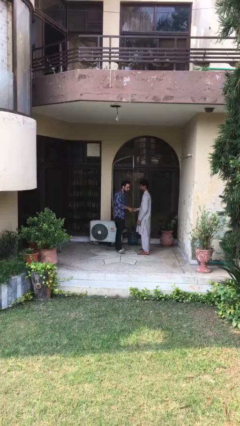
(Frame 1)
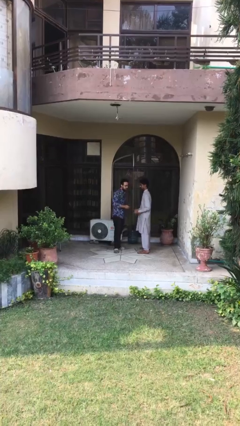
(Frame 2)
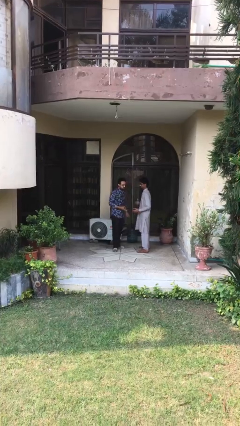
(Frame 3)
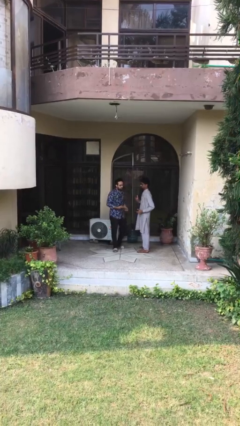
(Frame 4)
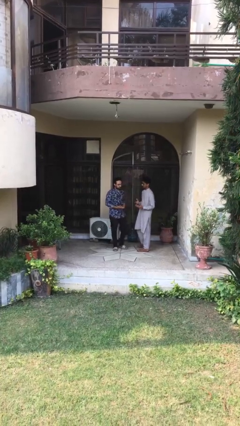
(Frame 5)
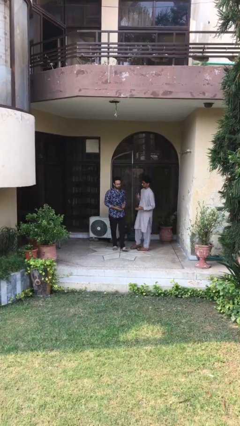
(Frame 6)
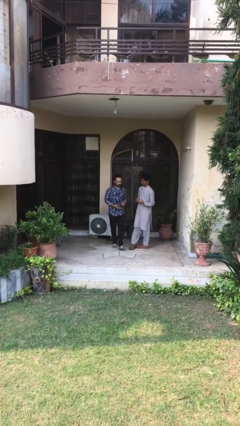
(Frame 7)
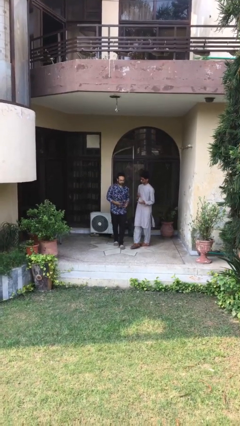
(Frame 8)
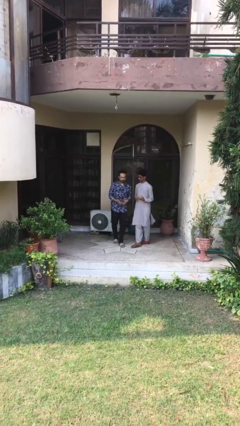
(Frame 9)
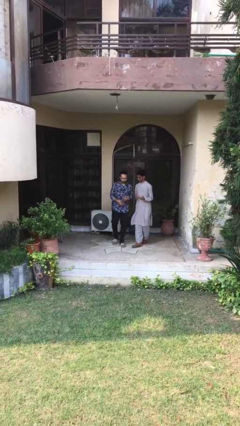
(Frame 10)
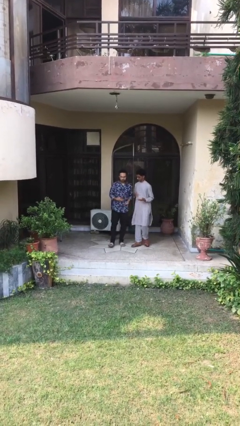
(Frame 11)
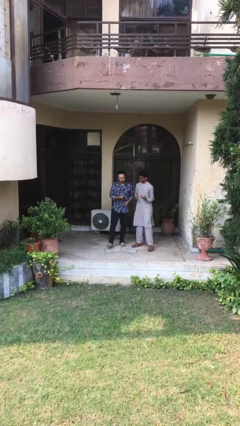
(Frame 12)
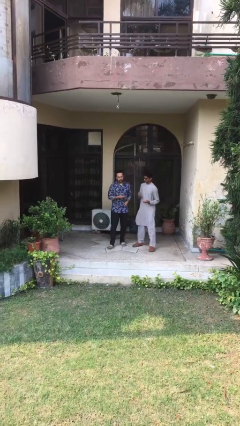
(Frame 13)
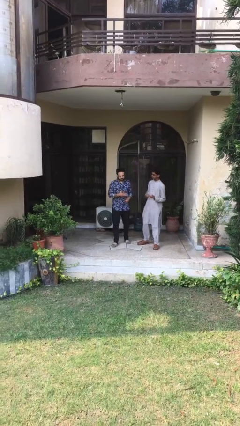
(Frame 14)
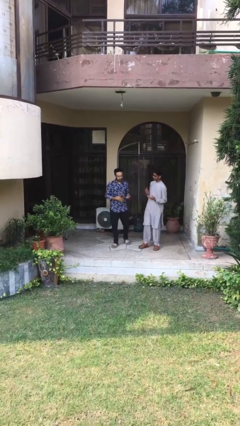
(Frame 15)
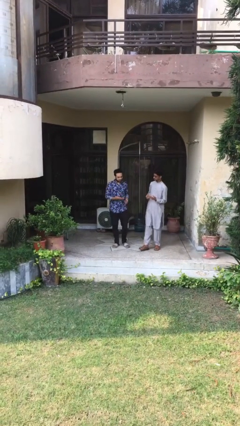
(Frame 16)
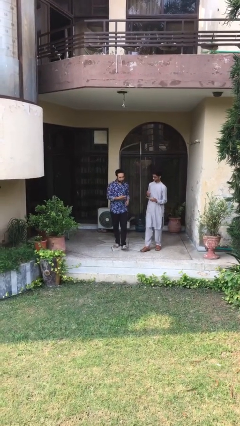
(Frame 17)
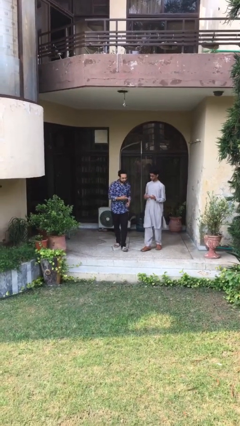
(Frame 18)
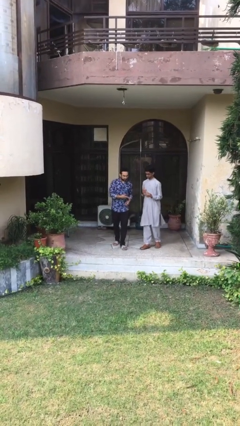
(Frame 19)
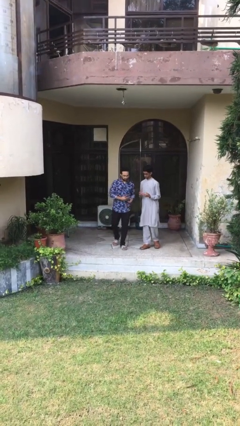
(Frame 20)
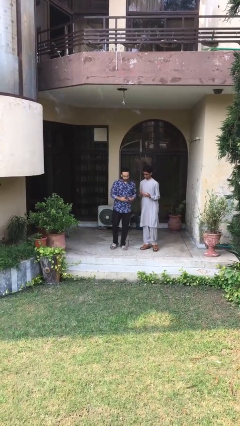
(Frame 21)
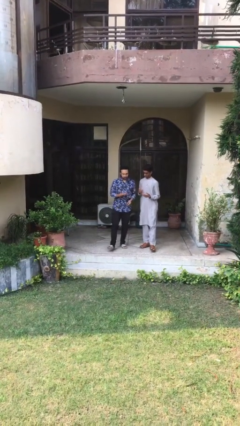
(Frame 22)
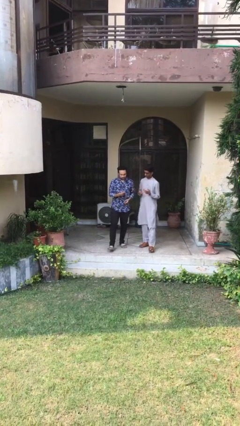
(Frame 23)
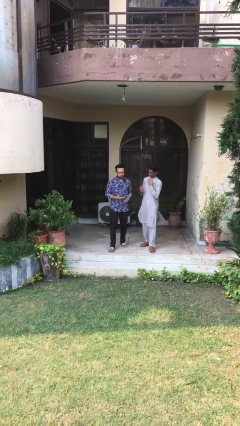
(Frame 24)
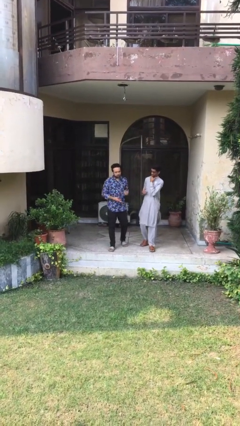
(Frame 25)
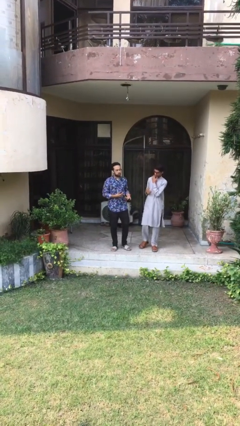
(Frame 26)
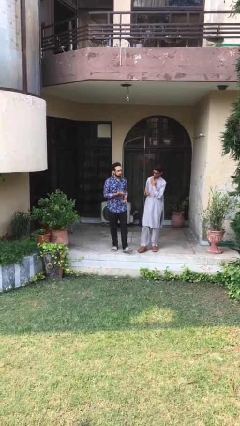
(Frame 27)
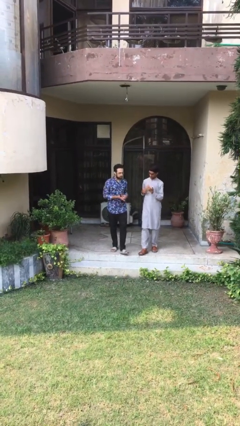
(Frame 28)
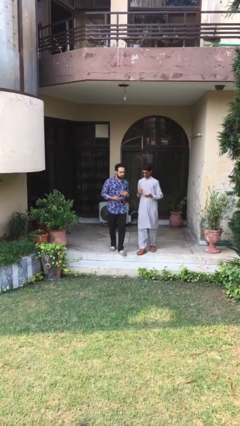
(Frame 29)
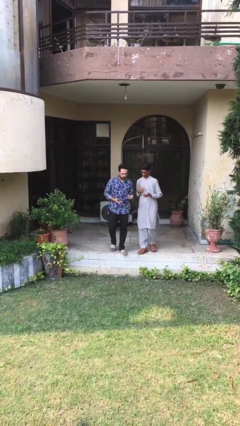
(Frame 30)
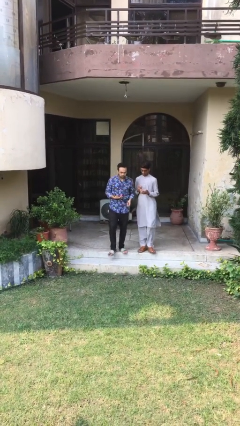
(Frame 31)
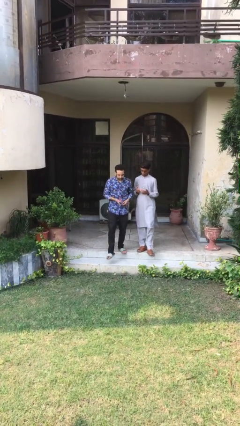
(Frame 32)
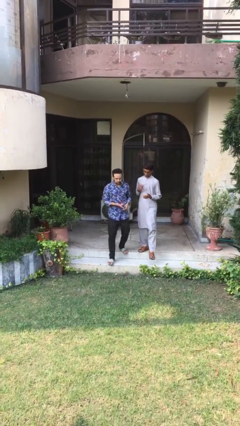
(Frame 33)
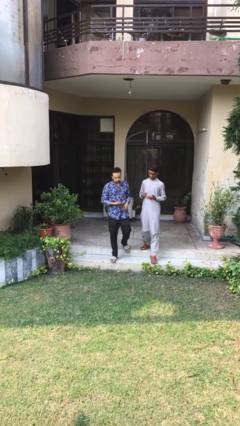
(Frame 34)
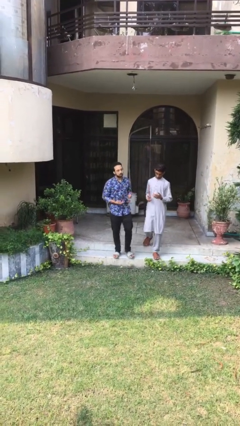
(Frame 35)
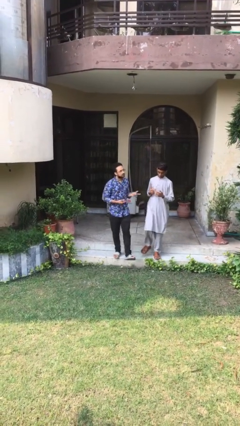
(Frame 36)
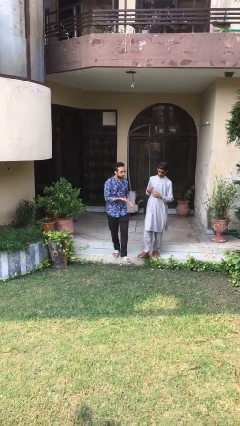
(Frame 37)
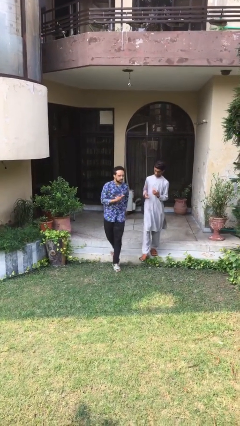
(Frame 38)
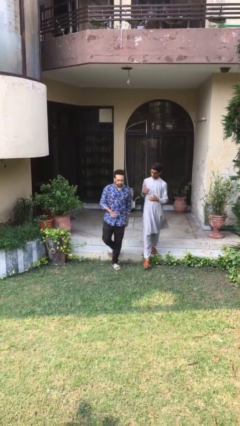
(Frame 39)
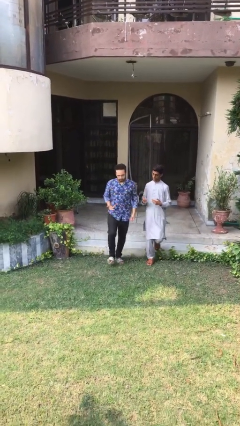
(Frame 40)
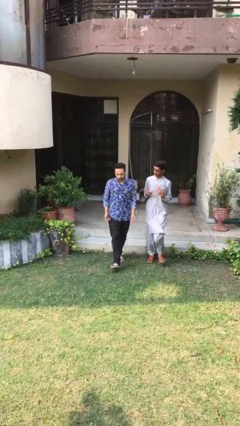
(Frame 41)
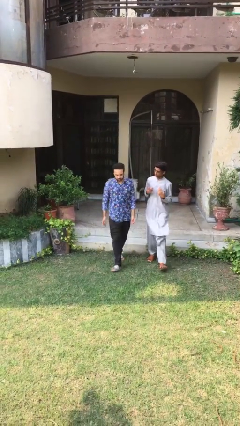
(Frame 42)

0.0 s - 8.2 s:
person talks to person

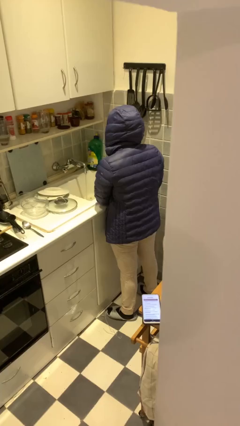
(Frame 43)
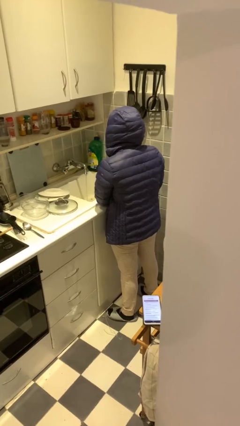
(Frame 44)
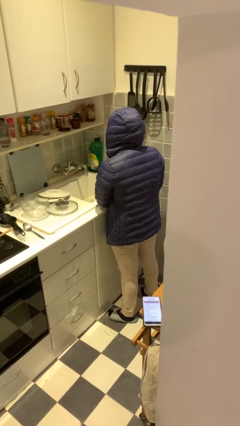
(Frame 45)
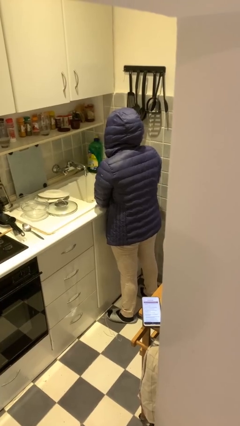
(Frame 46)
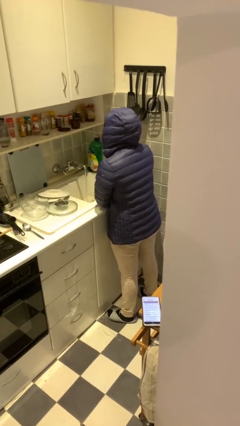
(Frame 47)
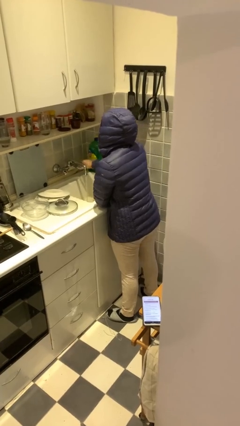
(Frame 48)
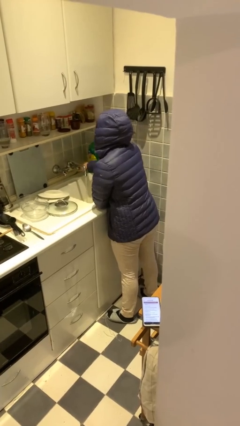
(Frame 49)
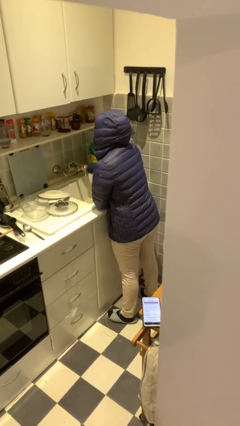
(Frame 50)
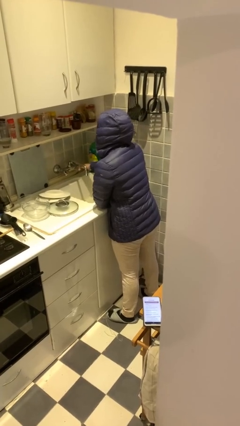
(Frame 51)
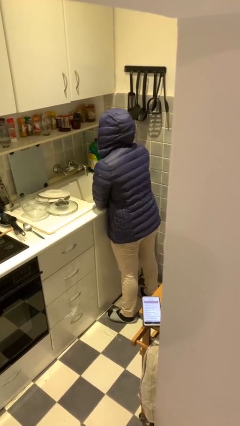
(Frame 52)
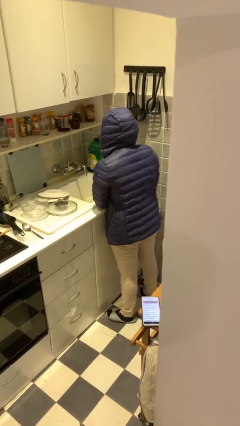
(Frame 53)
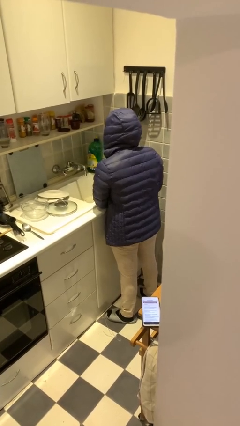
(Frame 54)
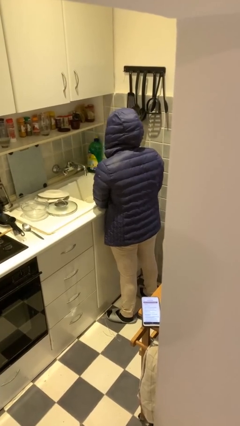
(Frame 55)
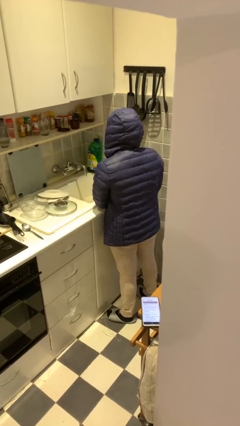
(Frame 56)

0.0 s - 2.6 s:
person turns off faucet

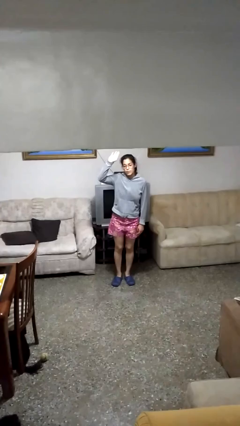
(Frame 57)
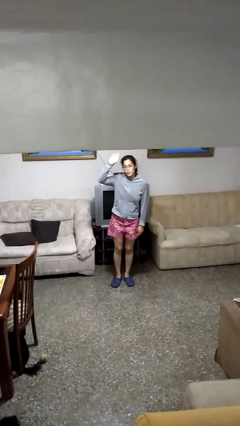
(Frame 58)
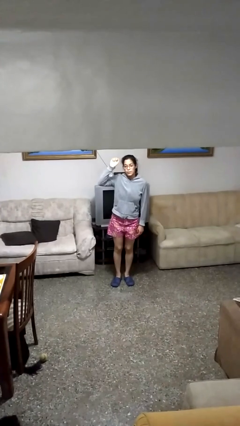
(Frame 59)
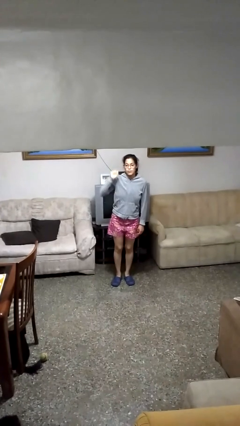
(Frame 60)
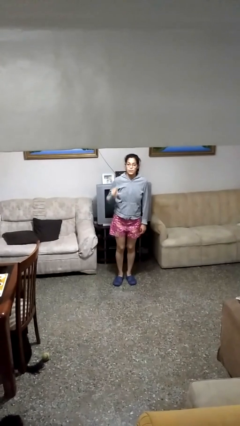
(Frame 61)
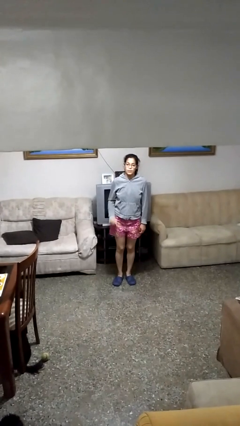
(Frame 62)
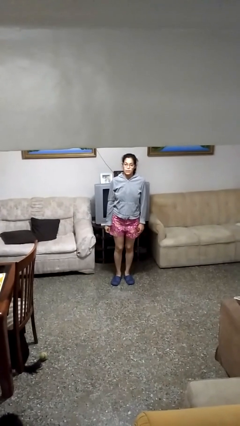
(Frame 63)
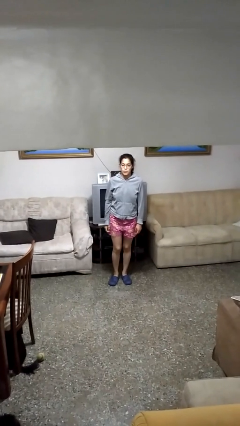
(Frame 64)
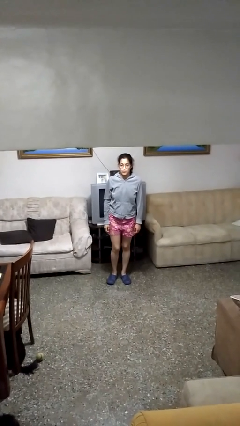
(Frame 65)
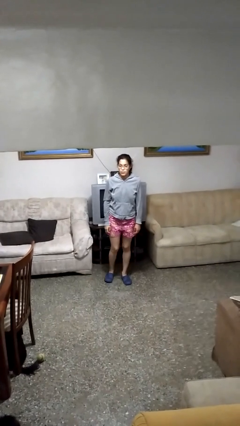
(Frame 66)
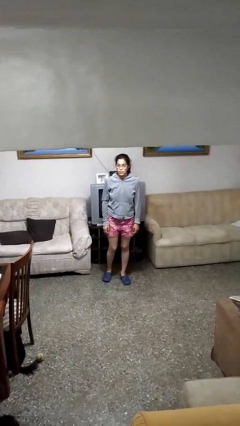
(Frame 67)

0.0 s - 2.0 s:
person gestures lower hand

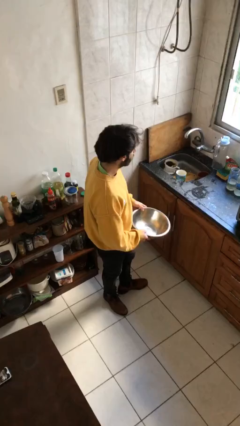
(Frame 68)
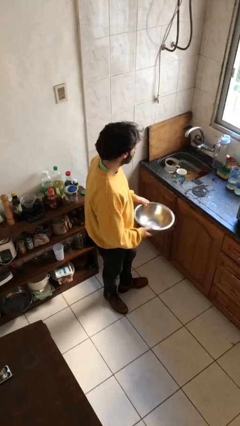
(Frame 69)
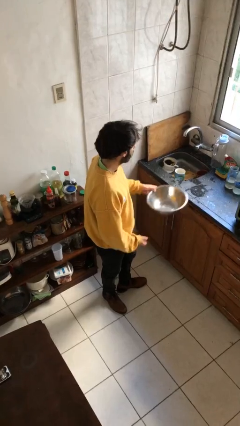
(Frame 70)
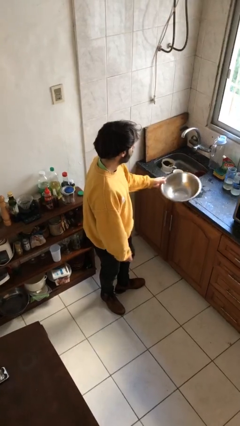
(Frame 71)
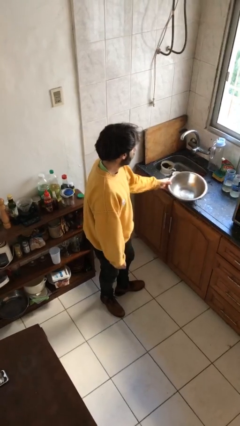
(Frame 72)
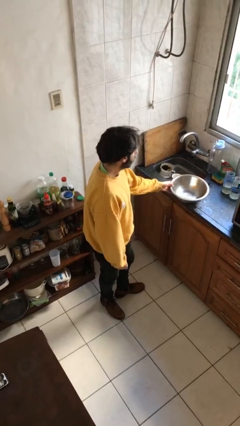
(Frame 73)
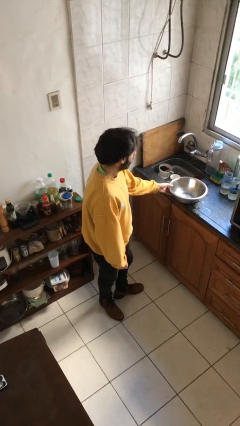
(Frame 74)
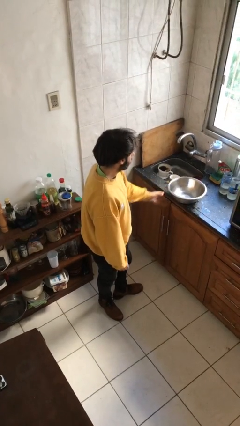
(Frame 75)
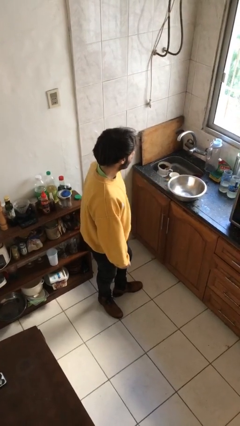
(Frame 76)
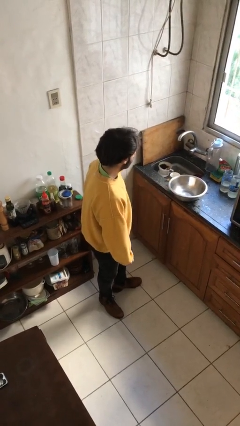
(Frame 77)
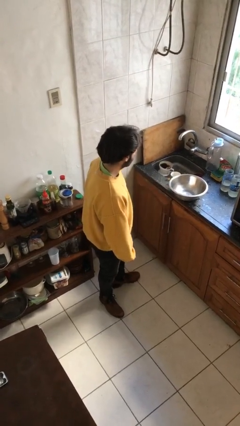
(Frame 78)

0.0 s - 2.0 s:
person puts down object on countertop

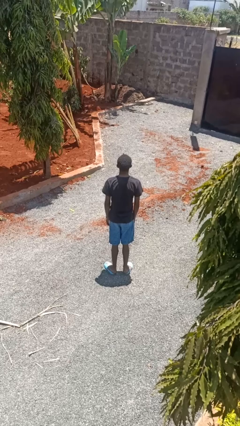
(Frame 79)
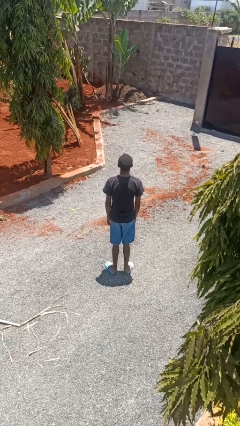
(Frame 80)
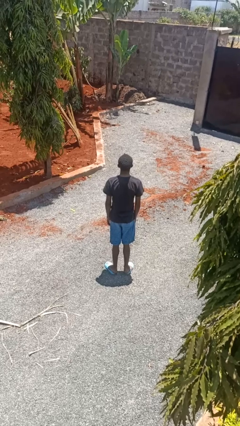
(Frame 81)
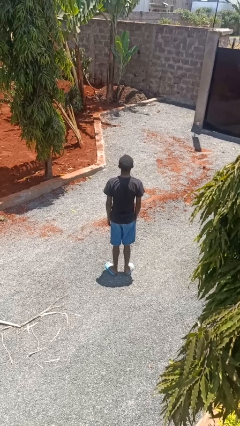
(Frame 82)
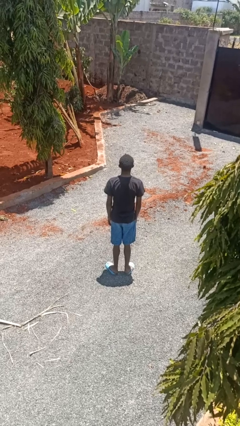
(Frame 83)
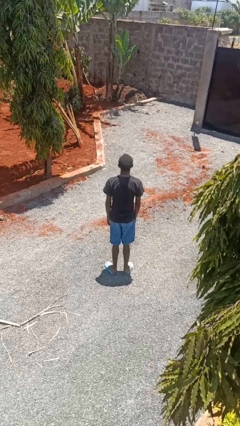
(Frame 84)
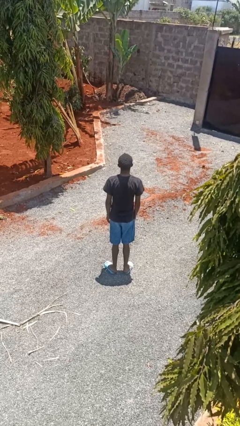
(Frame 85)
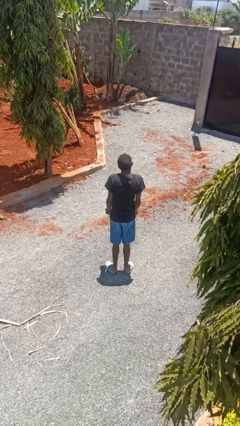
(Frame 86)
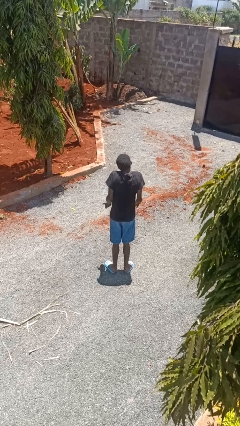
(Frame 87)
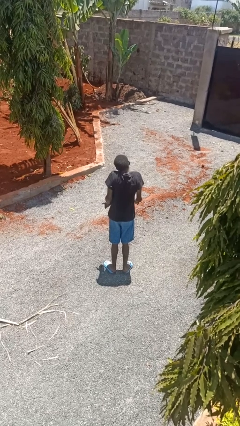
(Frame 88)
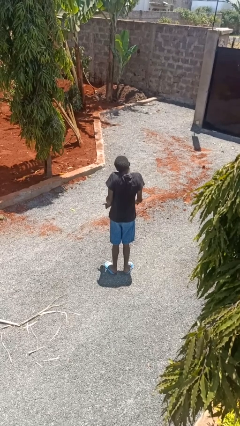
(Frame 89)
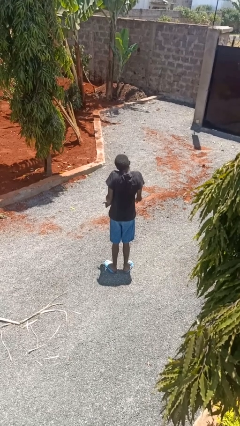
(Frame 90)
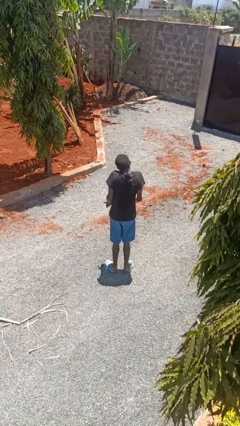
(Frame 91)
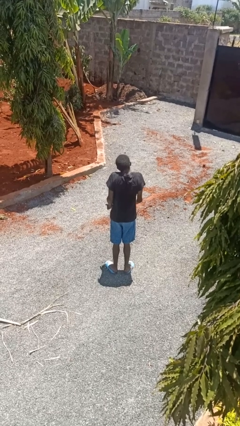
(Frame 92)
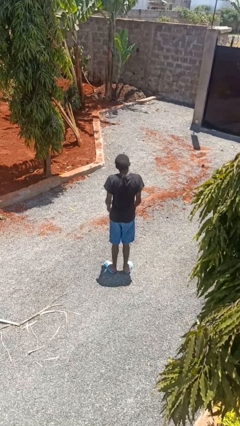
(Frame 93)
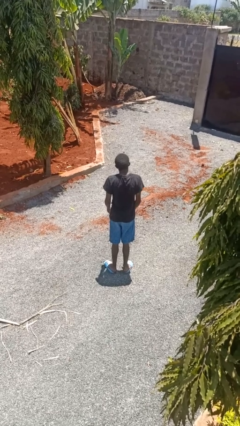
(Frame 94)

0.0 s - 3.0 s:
person shrugs
